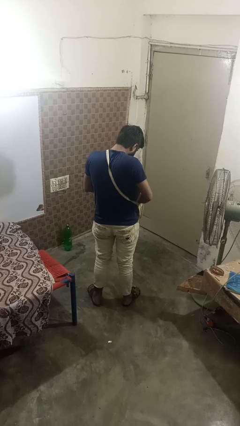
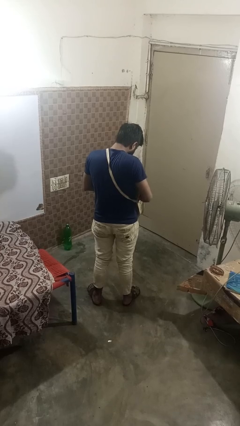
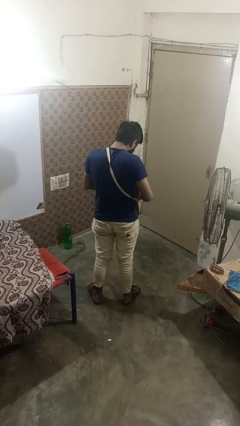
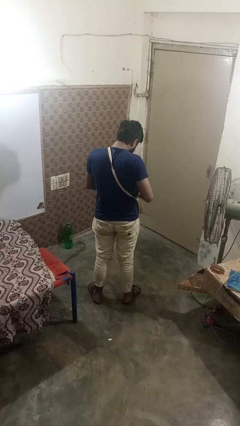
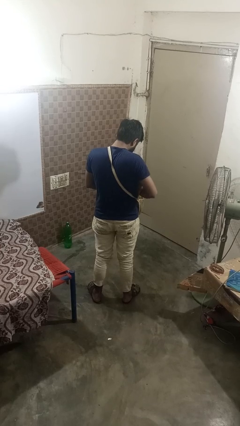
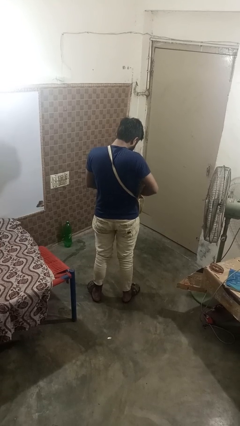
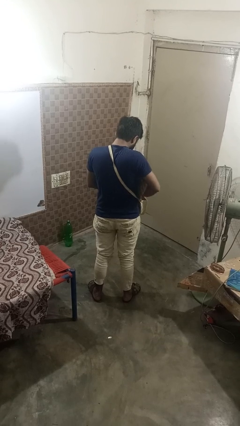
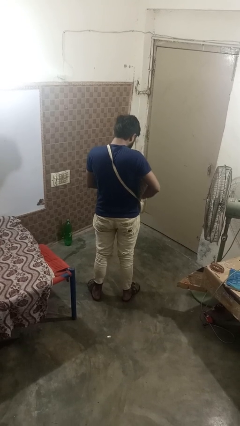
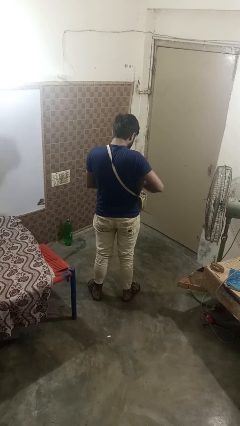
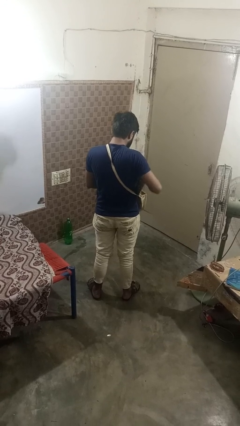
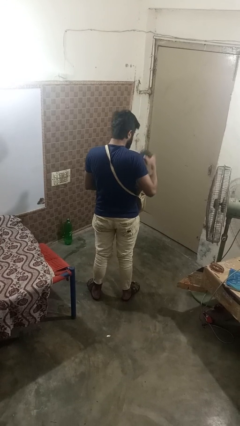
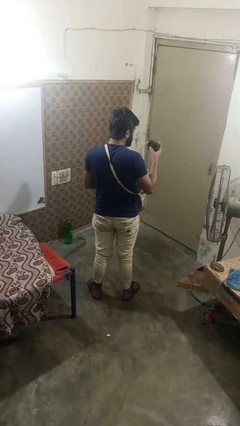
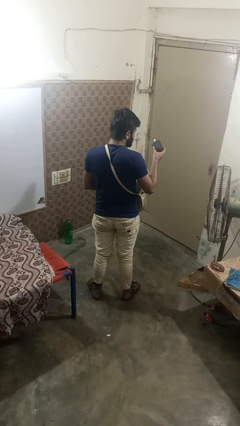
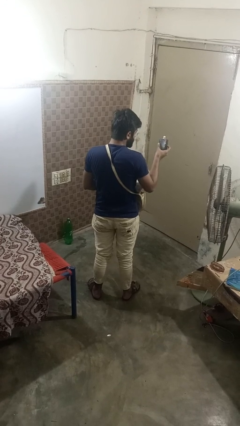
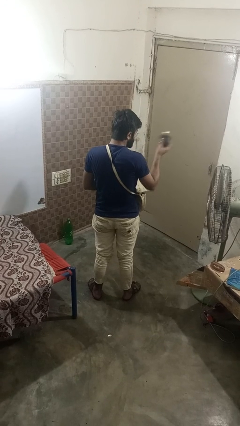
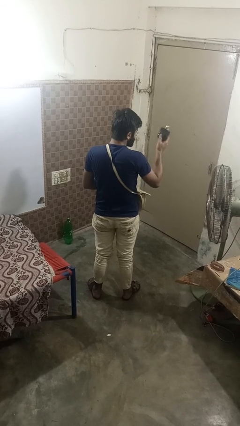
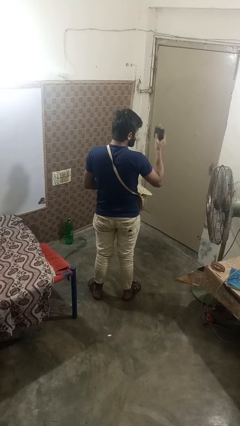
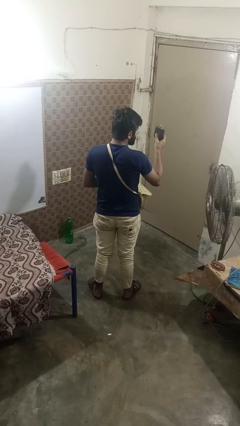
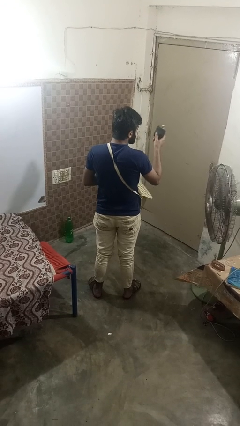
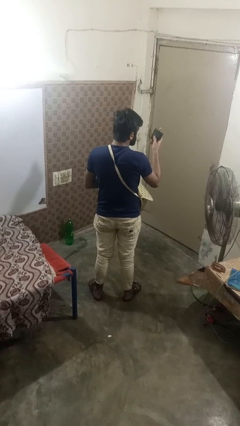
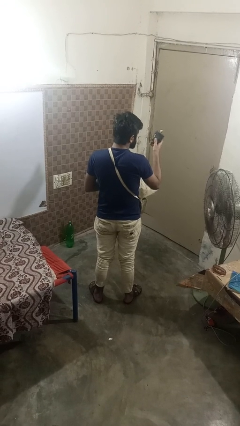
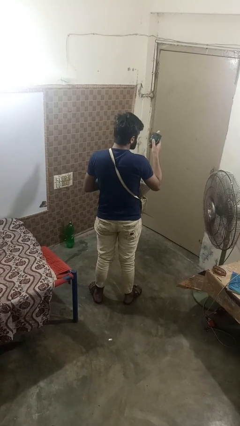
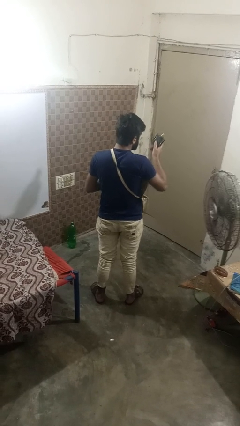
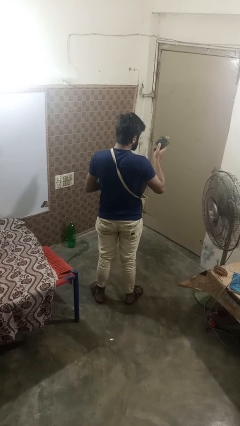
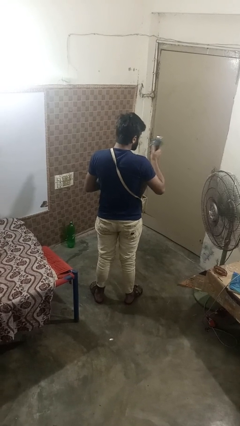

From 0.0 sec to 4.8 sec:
person takes object from purse

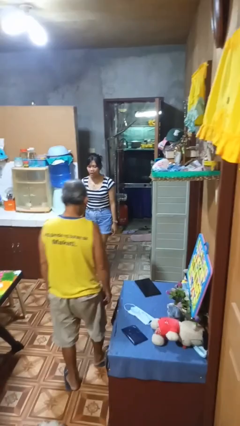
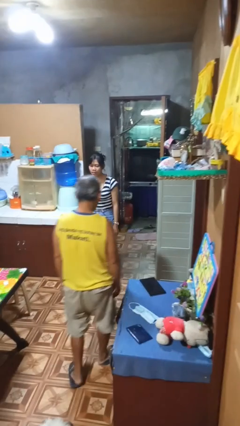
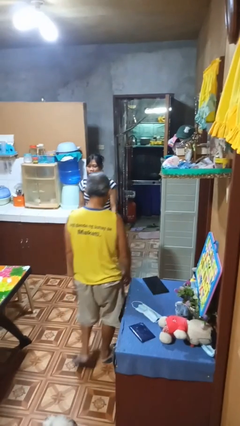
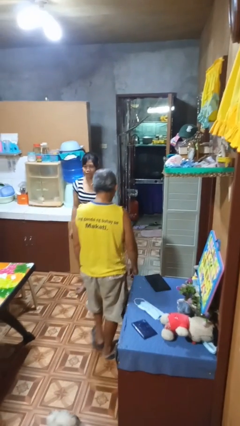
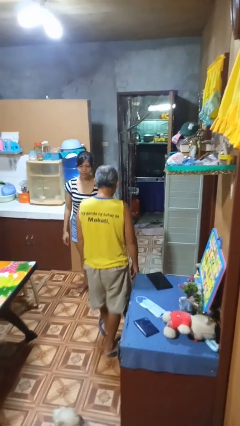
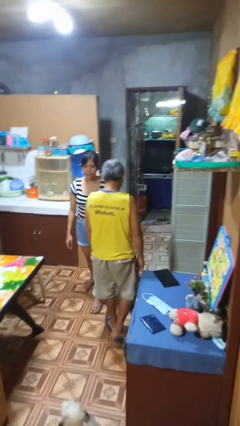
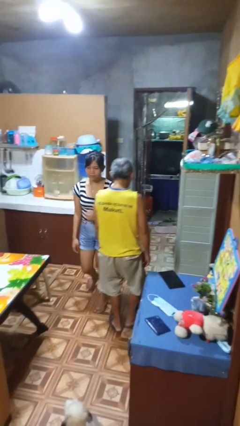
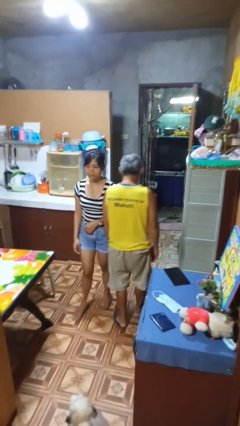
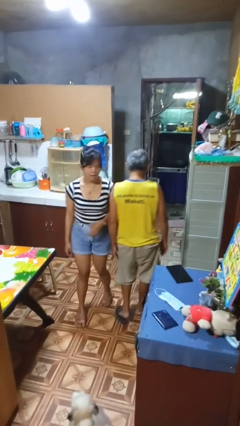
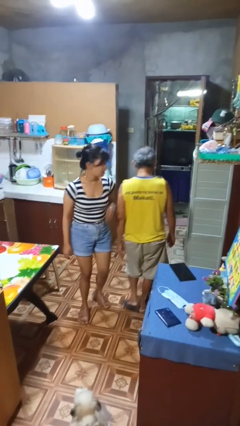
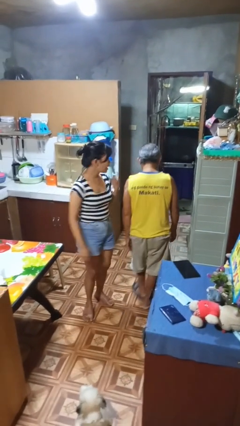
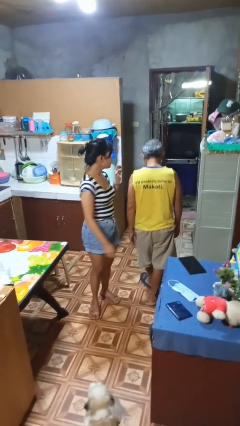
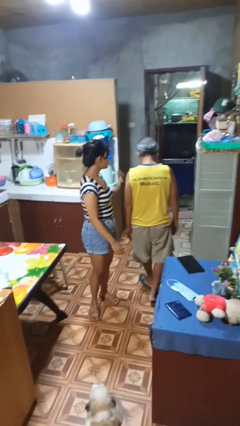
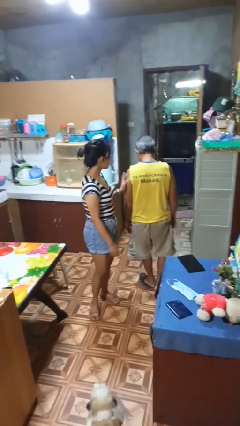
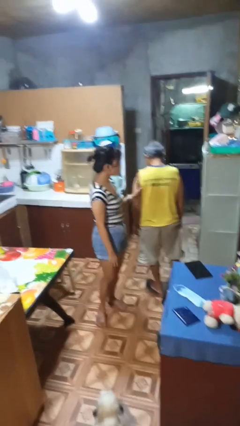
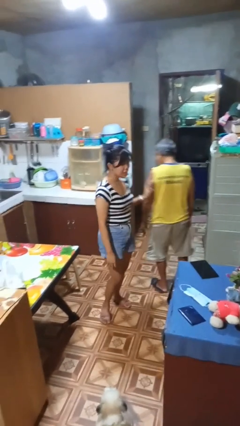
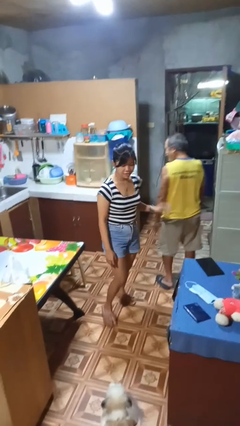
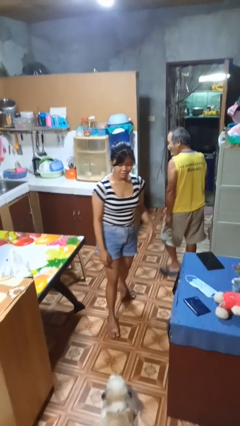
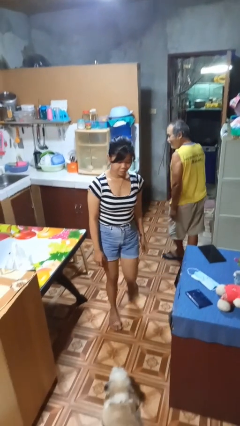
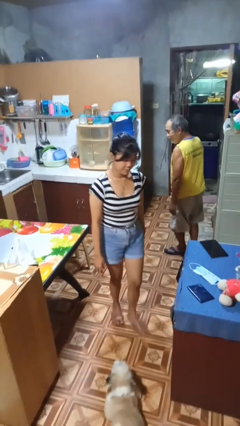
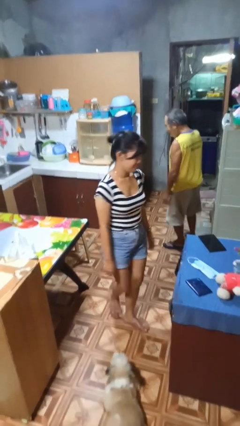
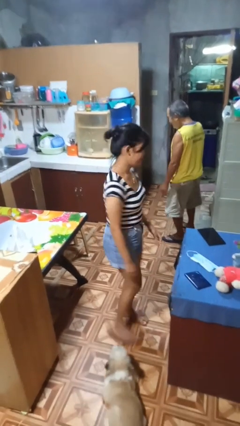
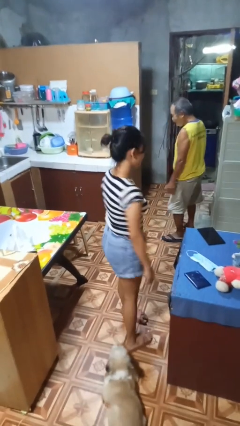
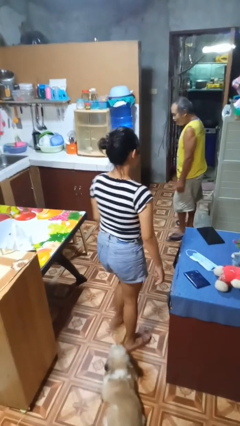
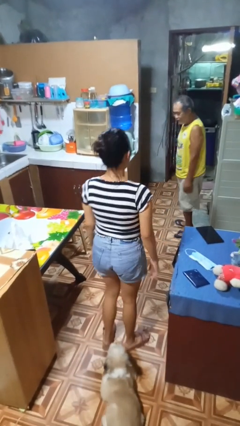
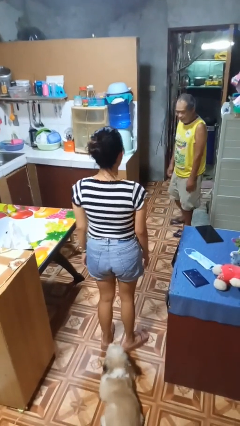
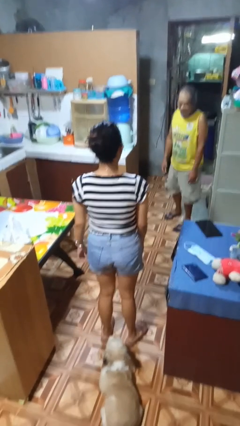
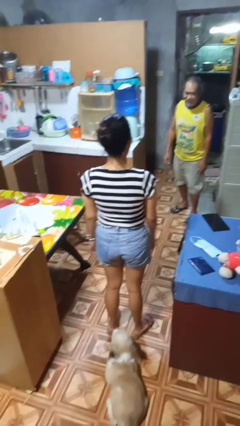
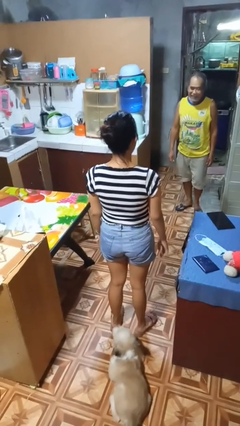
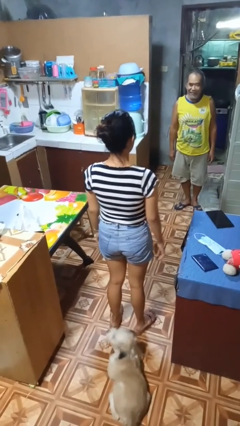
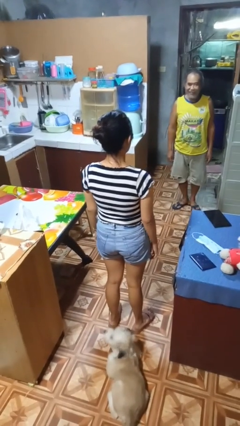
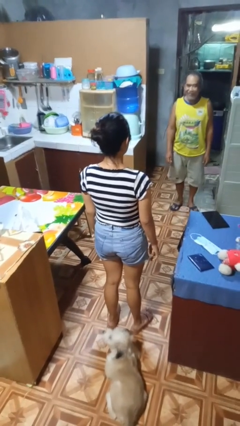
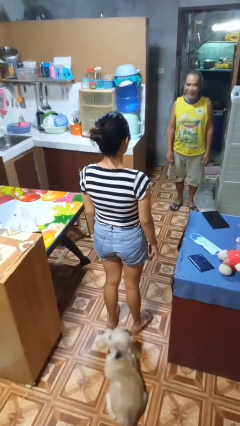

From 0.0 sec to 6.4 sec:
person bumps into person

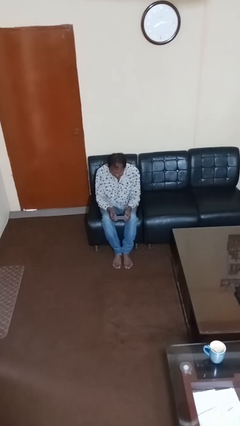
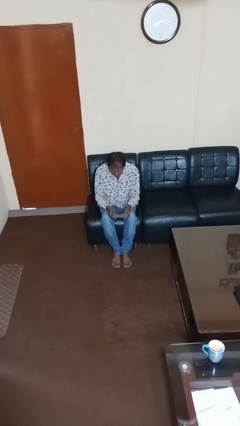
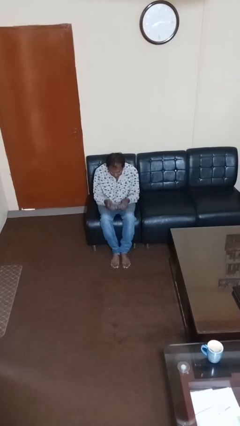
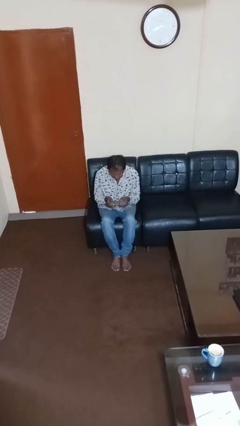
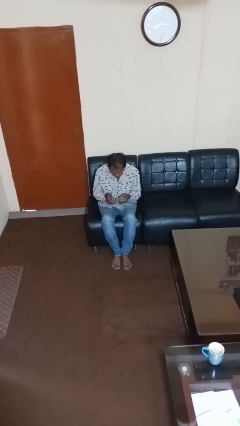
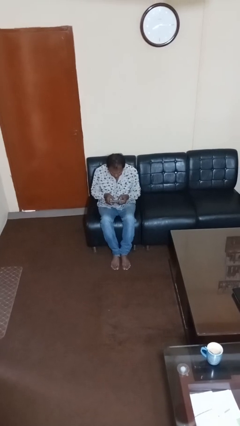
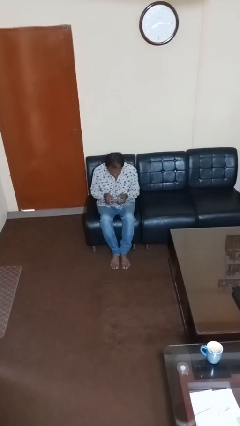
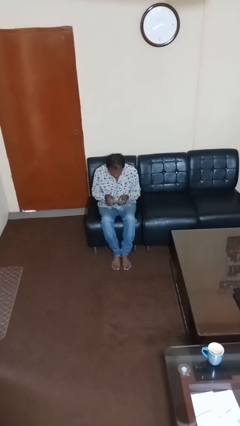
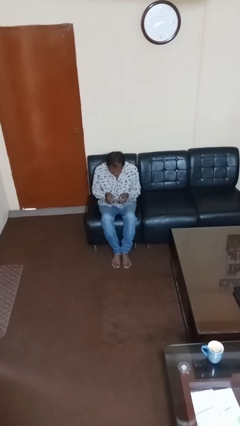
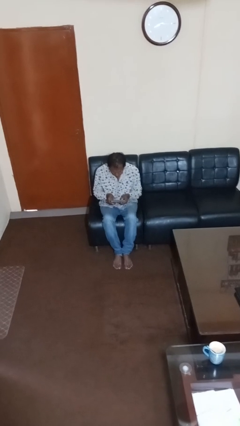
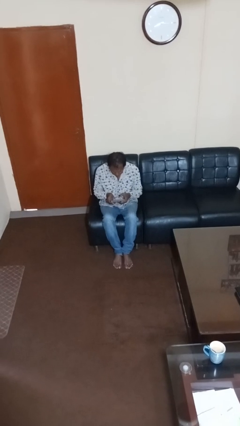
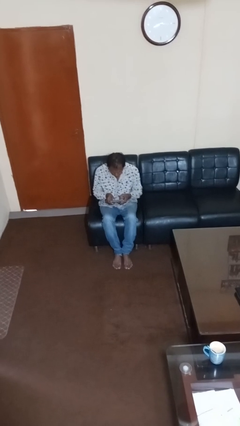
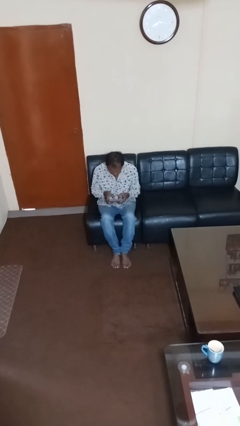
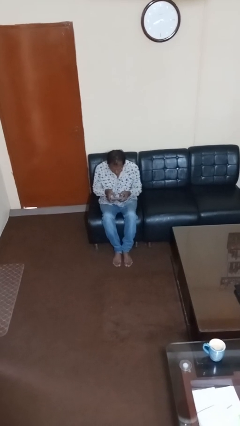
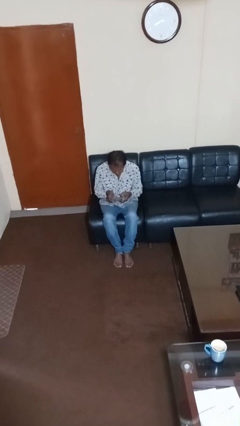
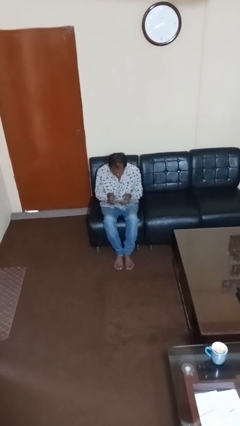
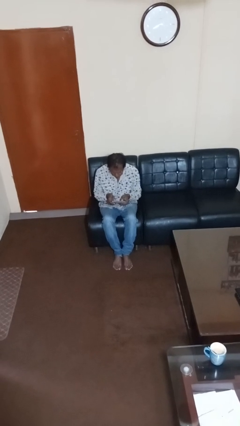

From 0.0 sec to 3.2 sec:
person interacts with tablet

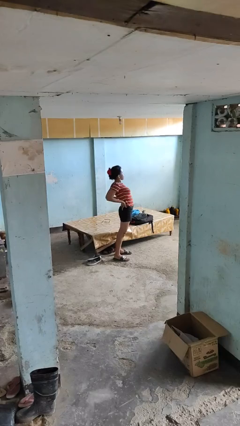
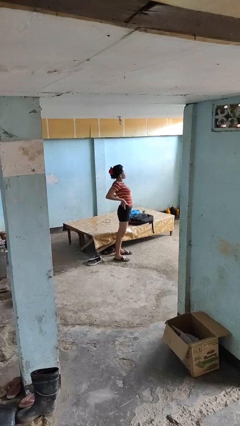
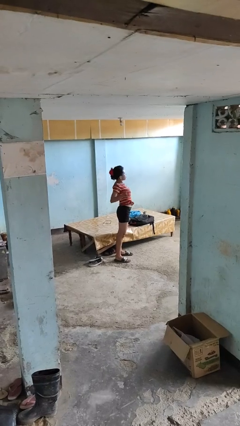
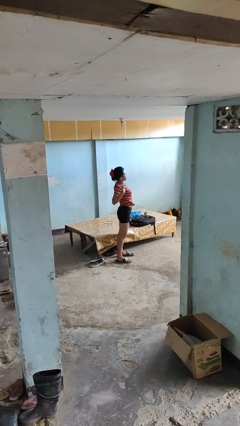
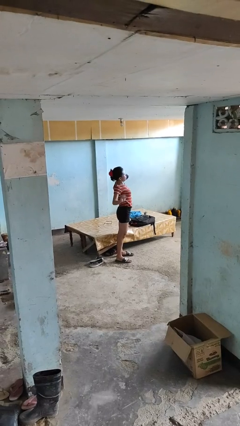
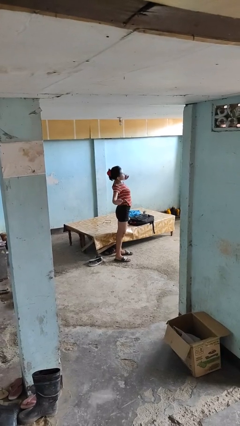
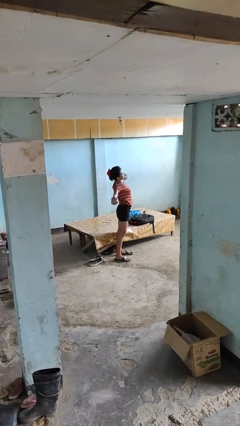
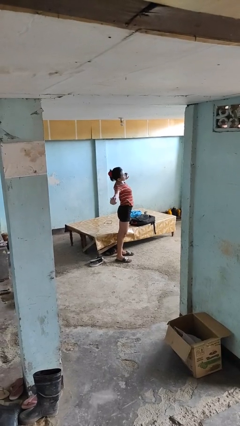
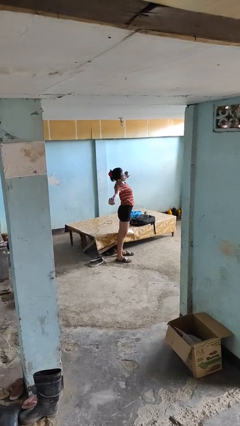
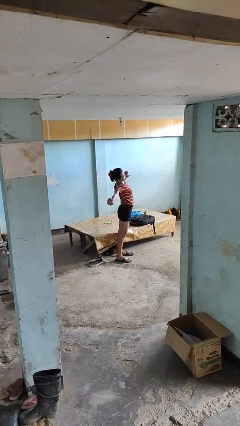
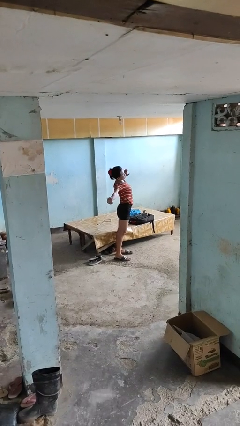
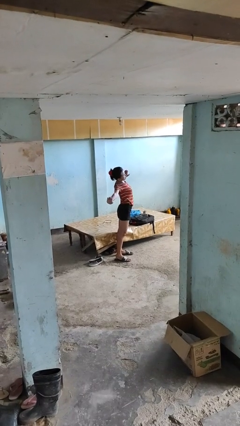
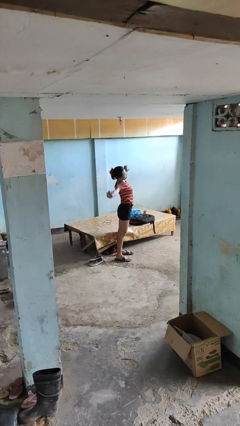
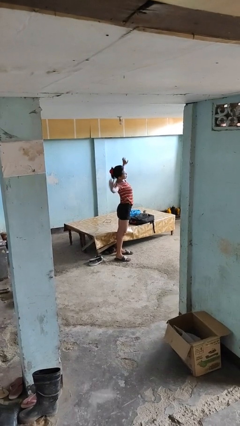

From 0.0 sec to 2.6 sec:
person stretches arms to side

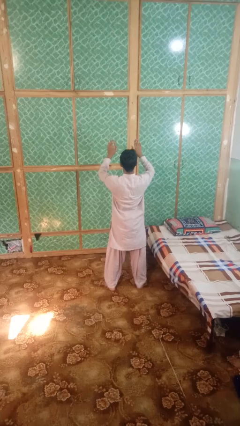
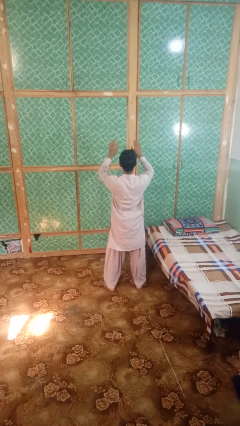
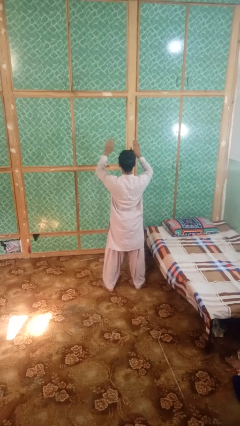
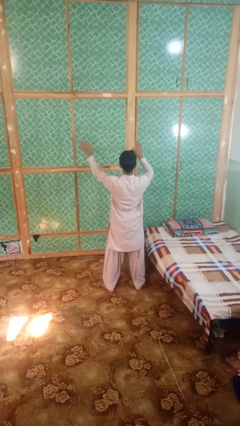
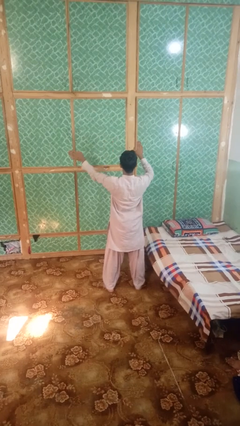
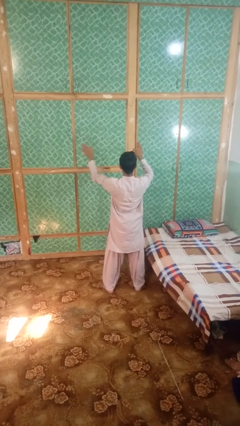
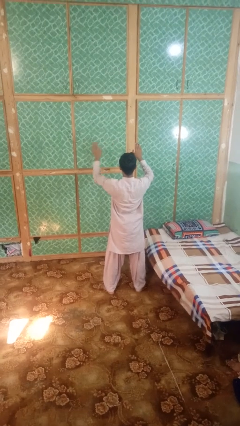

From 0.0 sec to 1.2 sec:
person gestures swipe left
